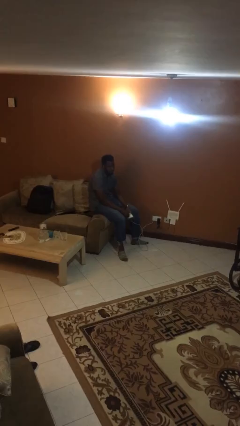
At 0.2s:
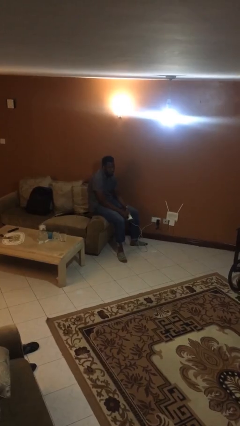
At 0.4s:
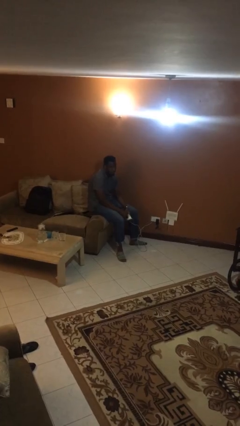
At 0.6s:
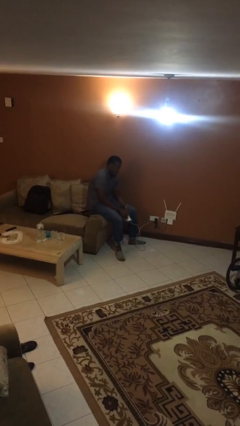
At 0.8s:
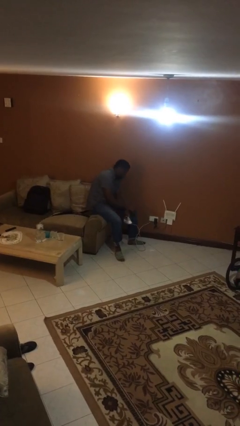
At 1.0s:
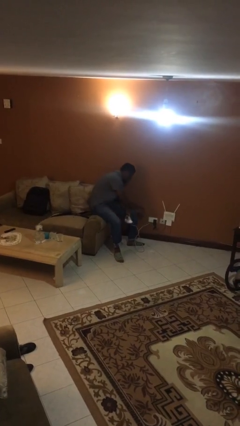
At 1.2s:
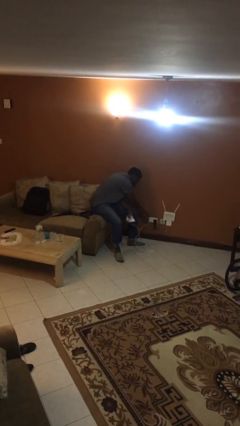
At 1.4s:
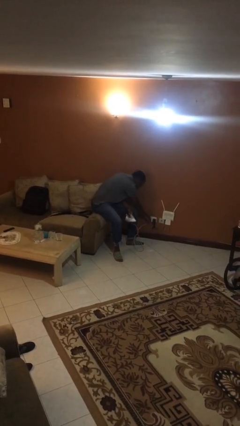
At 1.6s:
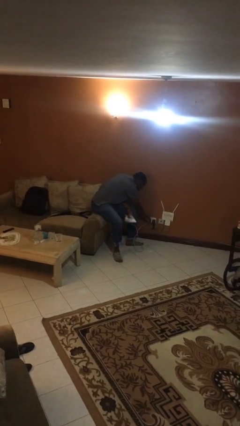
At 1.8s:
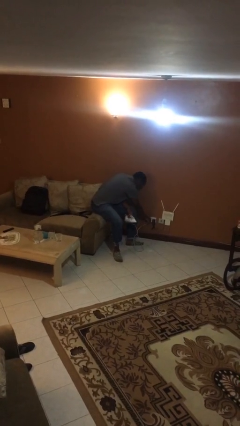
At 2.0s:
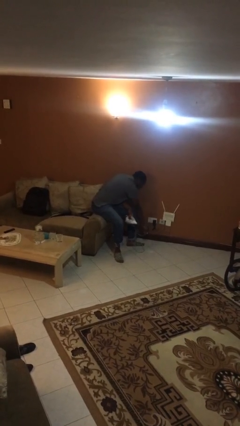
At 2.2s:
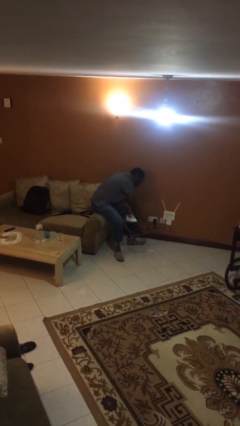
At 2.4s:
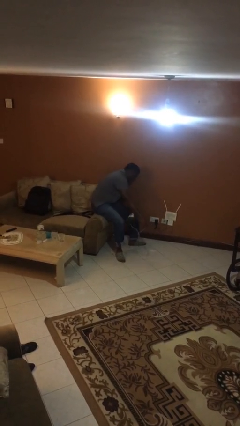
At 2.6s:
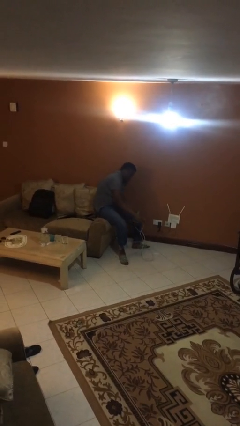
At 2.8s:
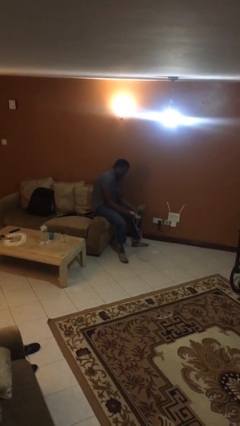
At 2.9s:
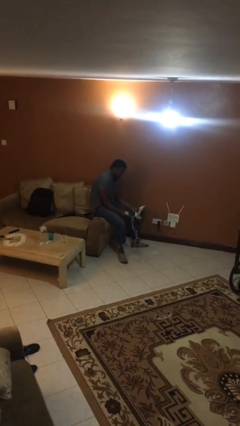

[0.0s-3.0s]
person unplugs from electrical socket

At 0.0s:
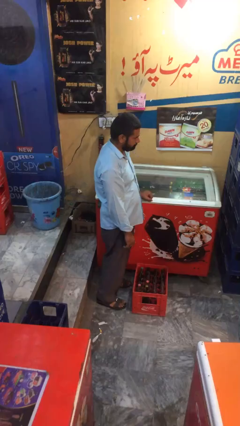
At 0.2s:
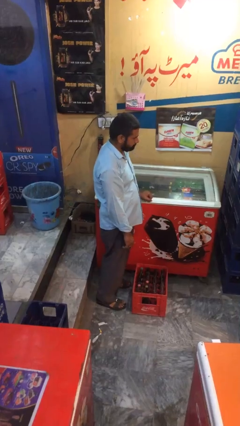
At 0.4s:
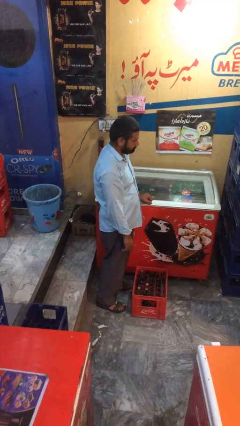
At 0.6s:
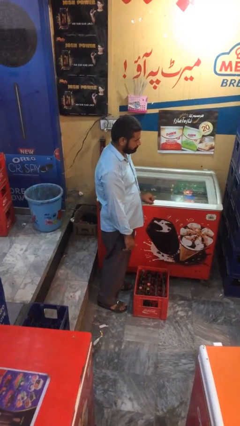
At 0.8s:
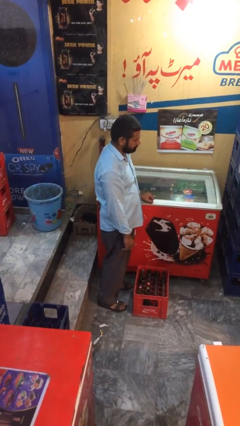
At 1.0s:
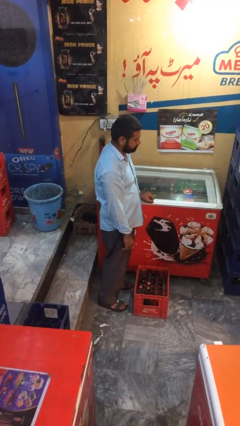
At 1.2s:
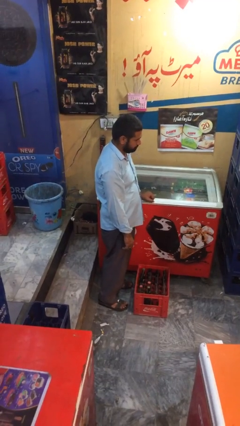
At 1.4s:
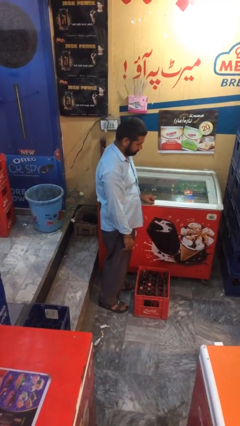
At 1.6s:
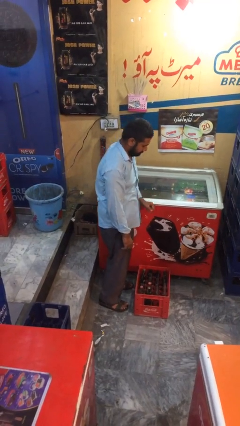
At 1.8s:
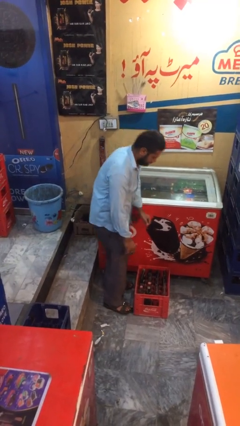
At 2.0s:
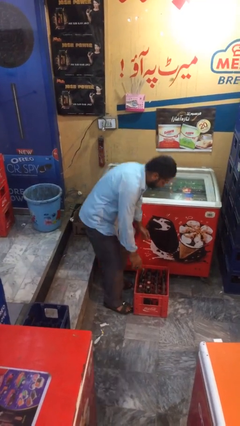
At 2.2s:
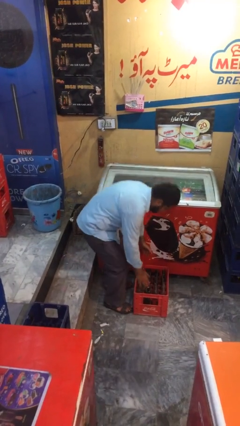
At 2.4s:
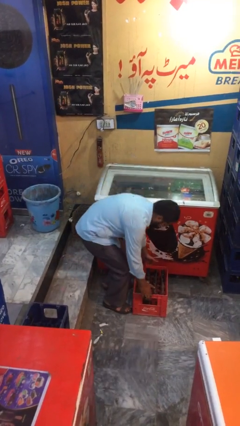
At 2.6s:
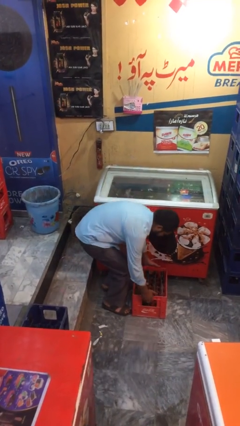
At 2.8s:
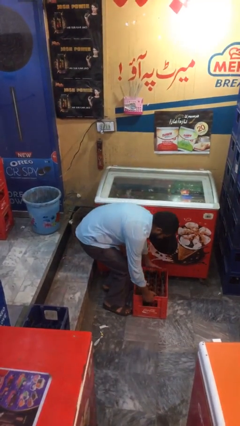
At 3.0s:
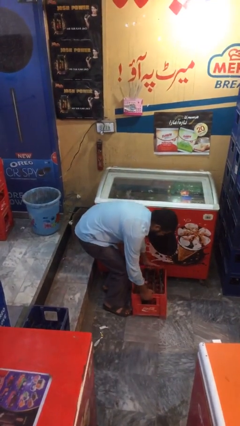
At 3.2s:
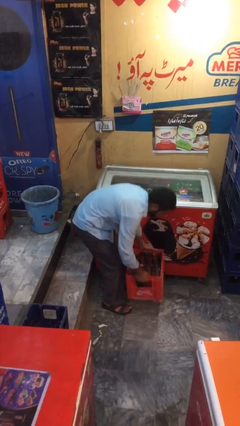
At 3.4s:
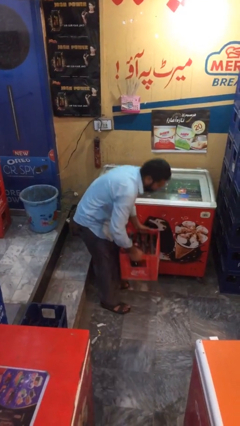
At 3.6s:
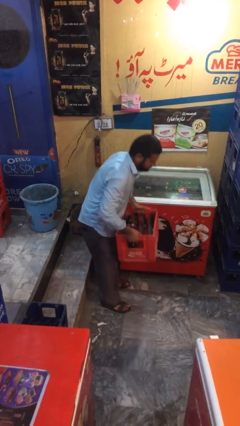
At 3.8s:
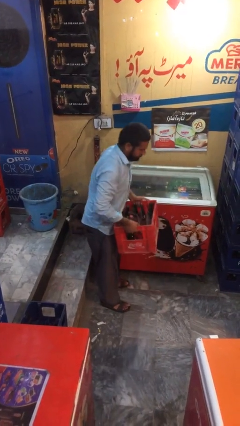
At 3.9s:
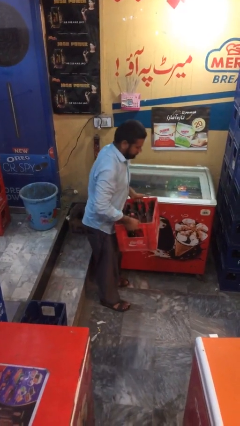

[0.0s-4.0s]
person picks up object from floor

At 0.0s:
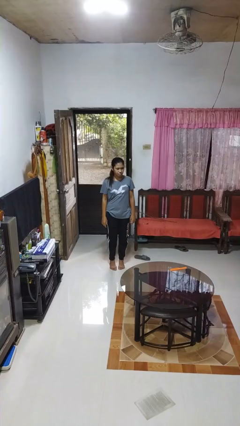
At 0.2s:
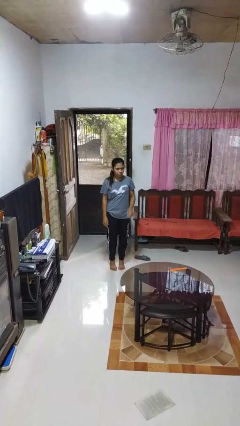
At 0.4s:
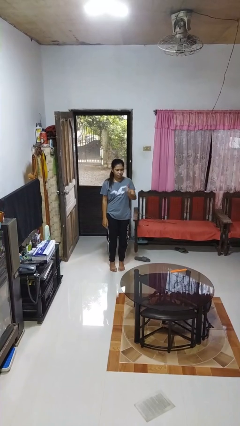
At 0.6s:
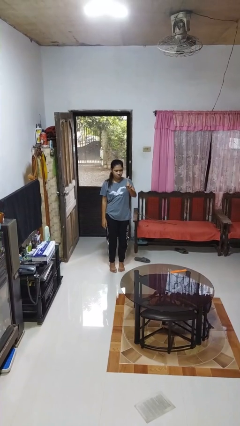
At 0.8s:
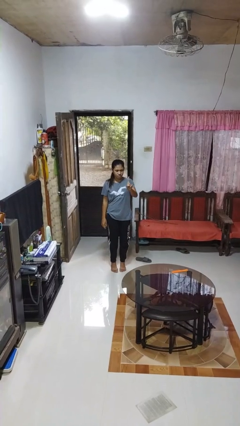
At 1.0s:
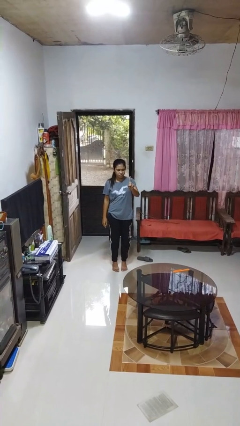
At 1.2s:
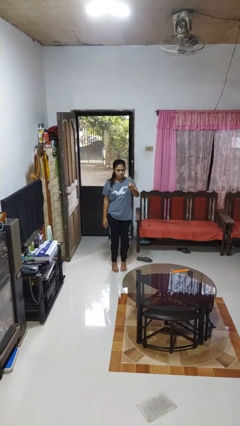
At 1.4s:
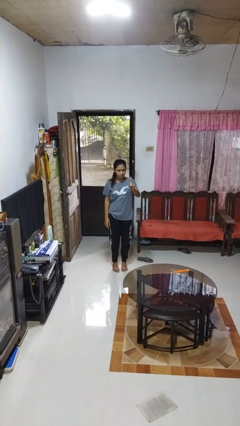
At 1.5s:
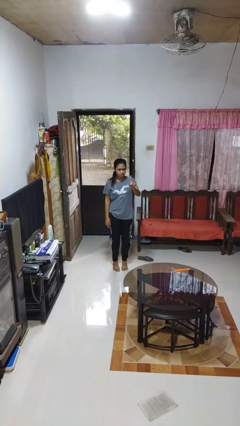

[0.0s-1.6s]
person gestures number one

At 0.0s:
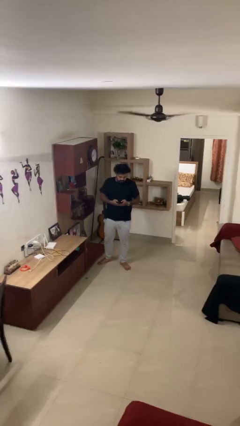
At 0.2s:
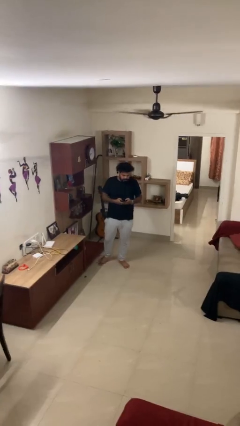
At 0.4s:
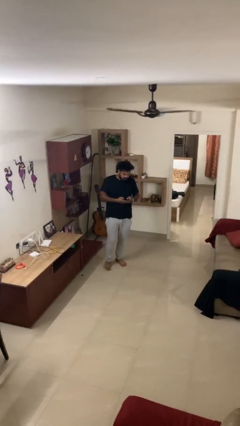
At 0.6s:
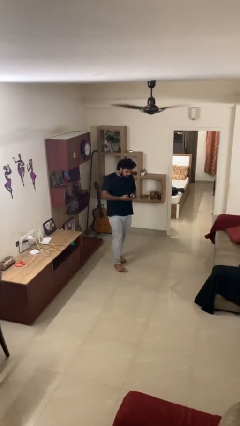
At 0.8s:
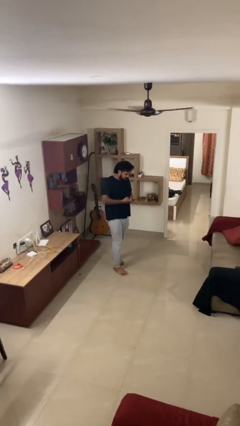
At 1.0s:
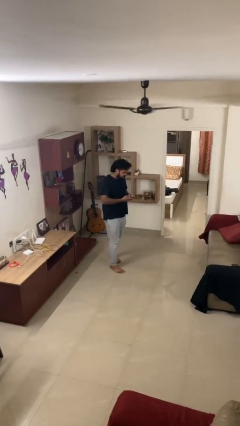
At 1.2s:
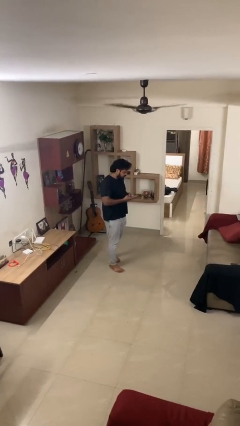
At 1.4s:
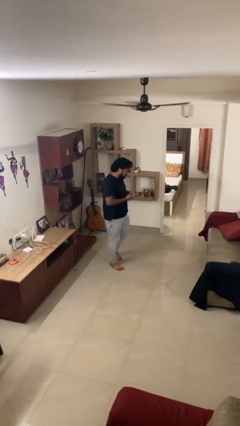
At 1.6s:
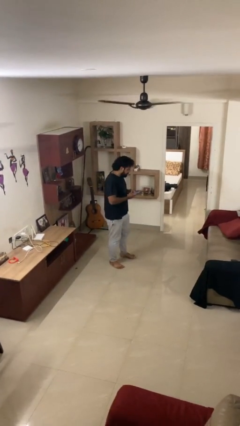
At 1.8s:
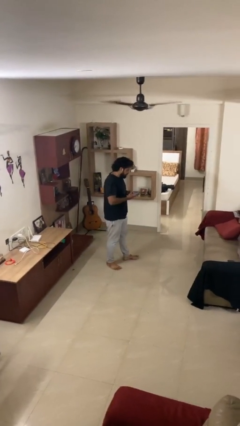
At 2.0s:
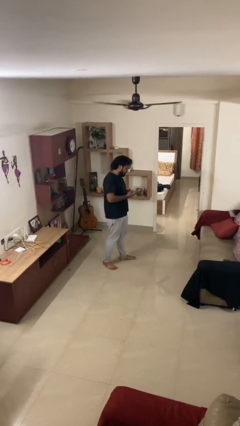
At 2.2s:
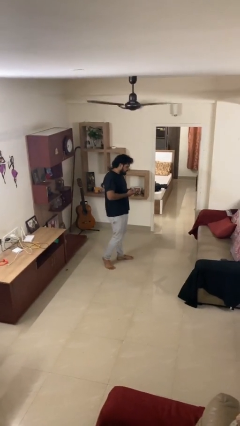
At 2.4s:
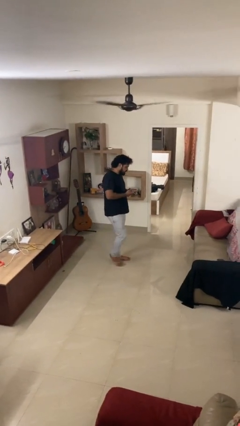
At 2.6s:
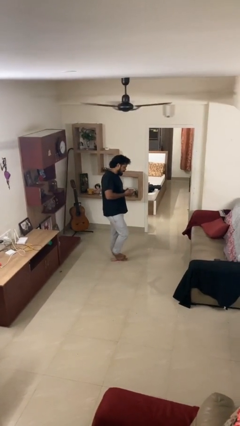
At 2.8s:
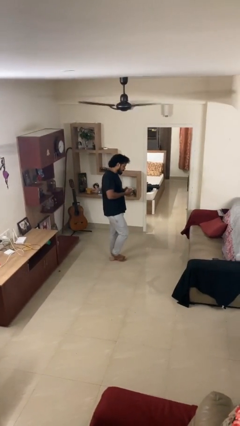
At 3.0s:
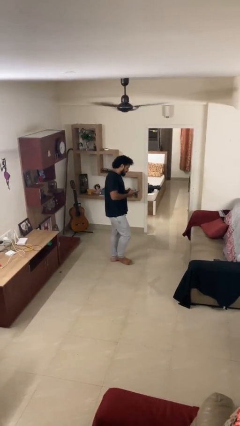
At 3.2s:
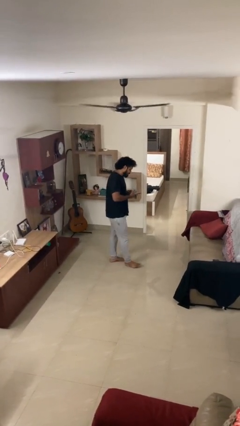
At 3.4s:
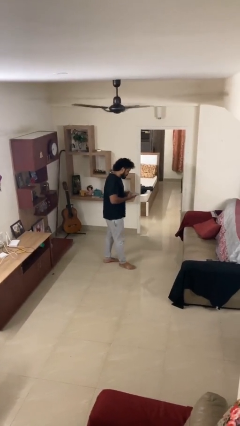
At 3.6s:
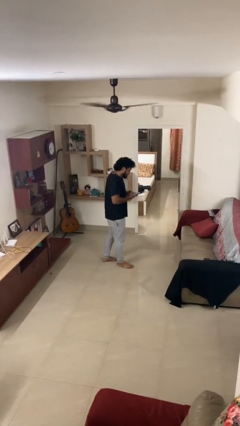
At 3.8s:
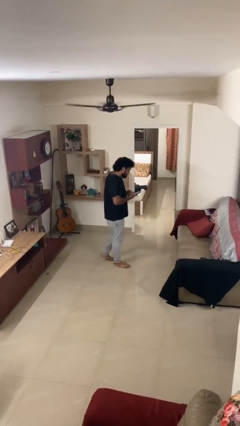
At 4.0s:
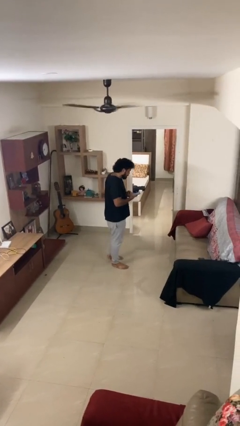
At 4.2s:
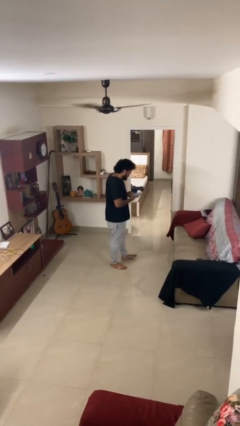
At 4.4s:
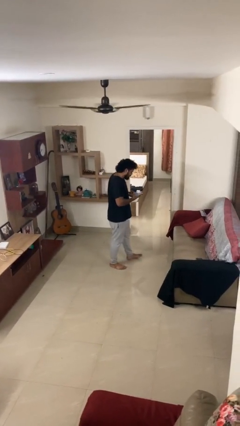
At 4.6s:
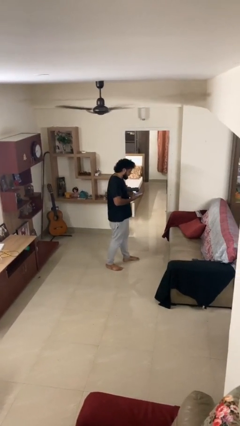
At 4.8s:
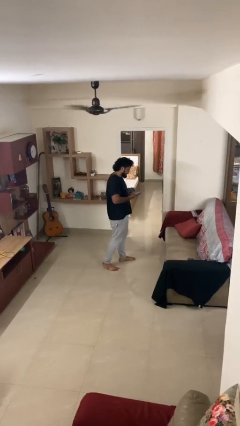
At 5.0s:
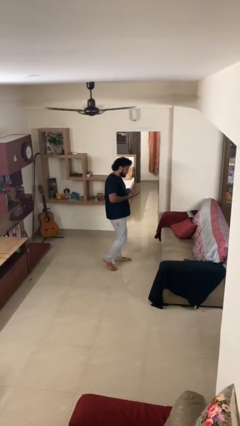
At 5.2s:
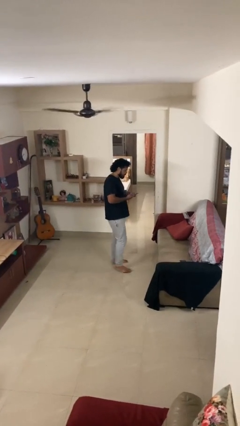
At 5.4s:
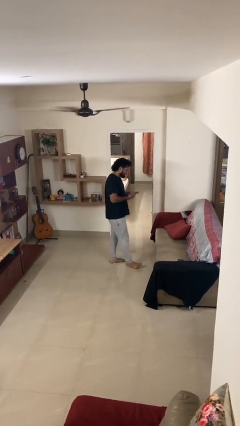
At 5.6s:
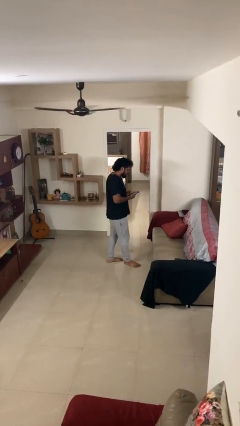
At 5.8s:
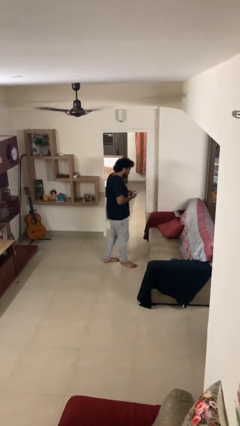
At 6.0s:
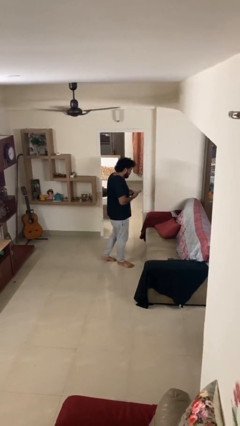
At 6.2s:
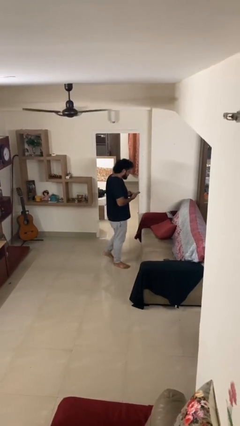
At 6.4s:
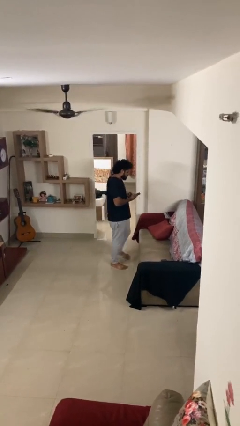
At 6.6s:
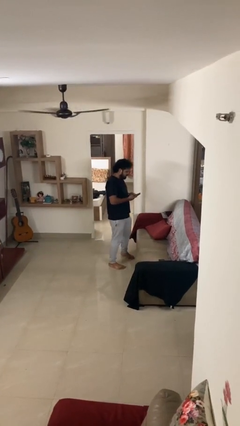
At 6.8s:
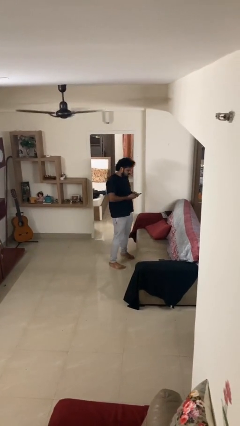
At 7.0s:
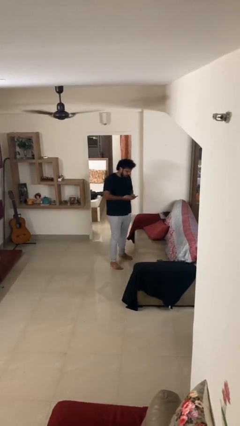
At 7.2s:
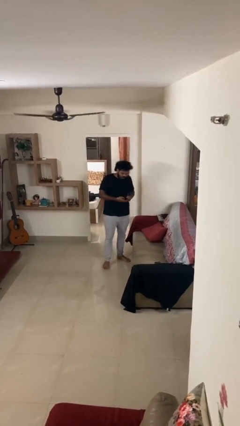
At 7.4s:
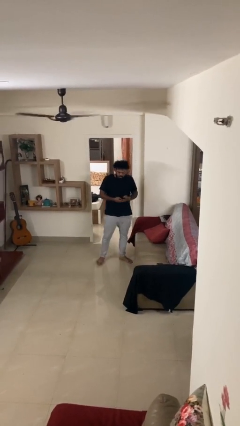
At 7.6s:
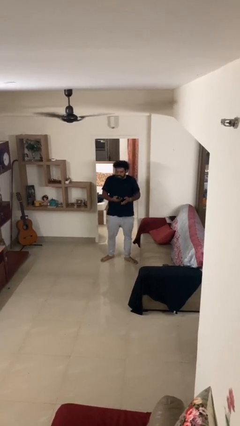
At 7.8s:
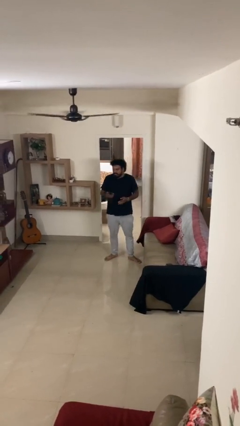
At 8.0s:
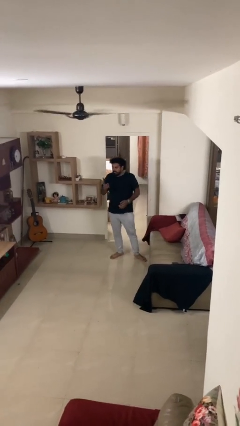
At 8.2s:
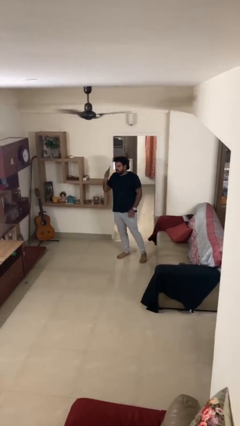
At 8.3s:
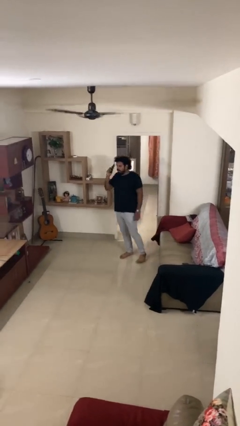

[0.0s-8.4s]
person texts on phone

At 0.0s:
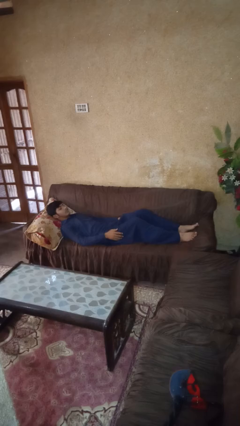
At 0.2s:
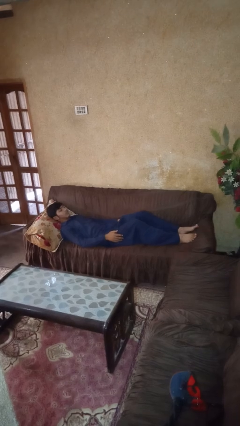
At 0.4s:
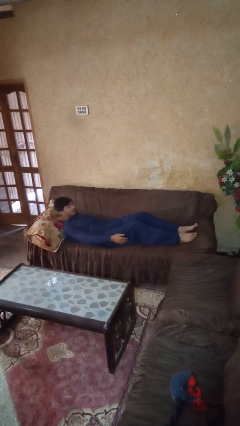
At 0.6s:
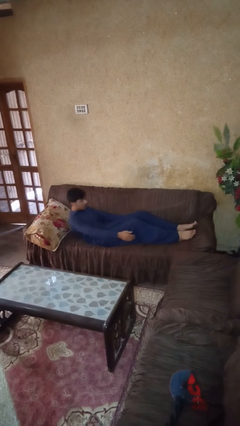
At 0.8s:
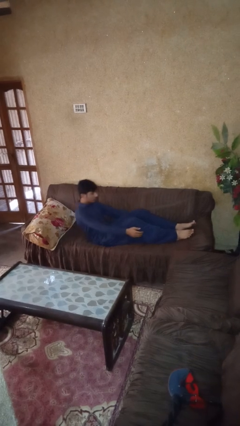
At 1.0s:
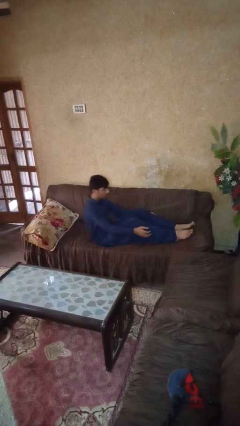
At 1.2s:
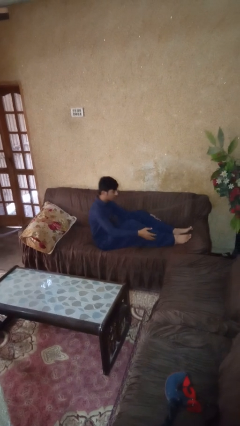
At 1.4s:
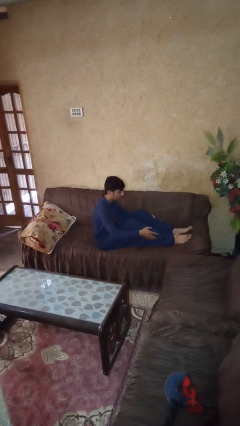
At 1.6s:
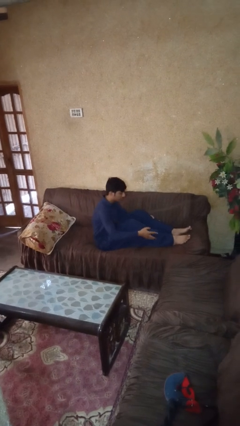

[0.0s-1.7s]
person stands up
